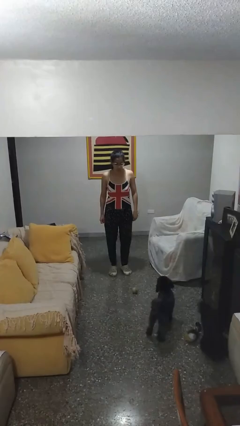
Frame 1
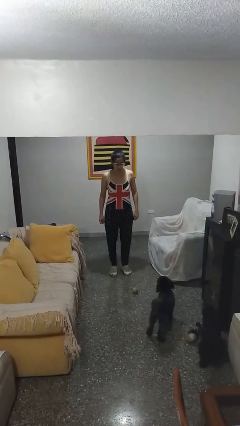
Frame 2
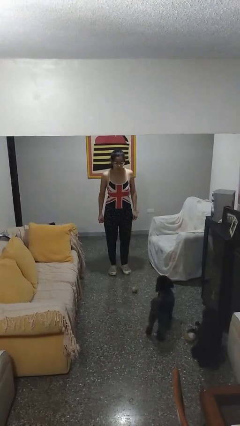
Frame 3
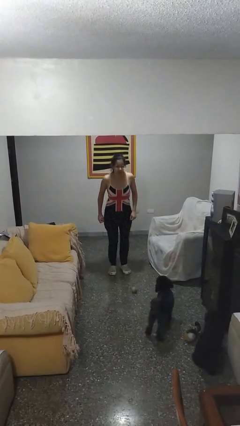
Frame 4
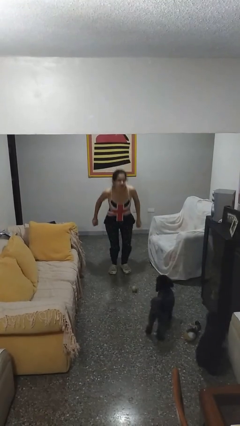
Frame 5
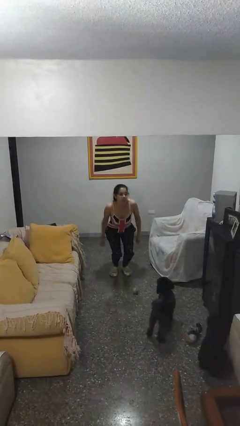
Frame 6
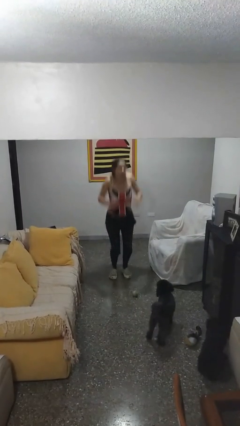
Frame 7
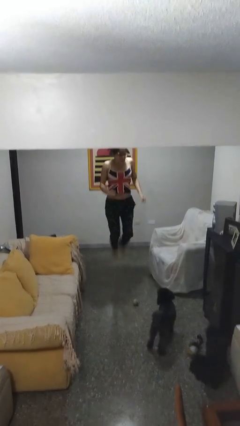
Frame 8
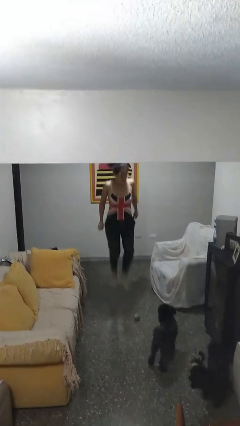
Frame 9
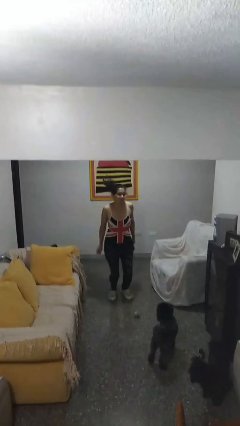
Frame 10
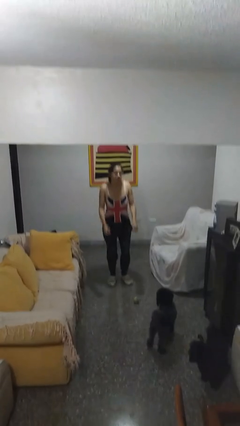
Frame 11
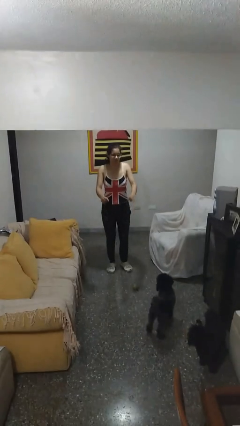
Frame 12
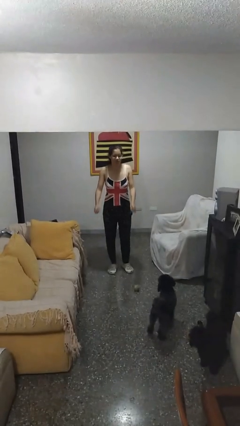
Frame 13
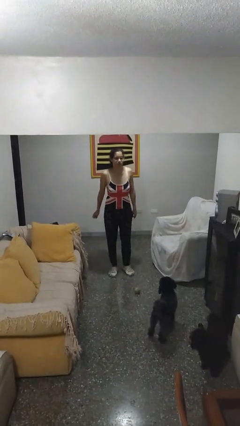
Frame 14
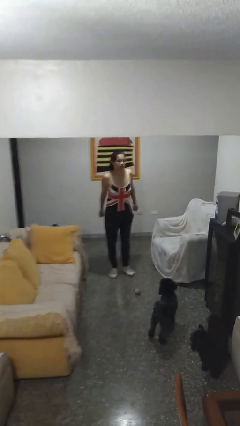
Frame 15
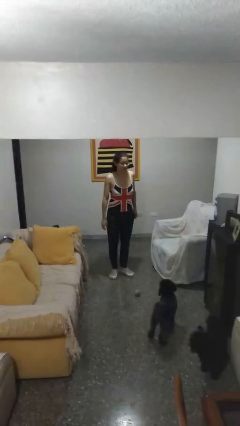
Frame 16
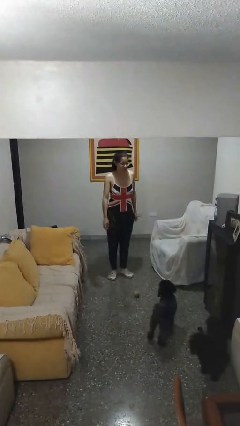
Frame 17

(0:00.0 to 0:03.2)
person jumps

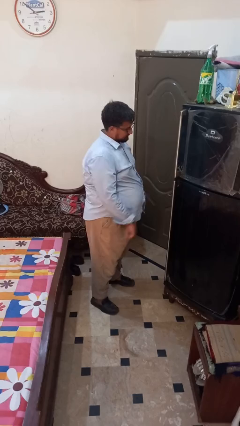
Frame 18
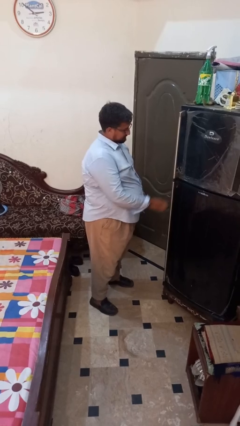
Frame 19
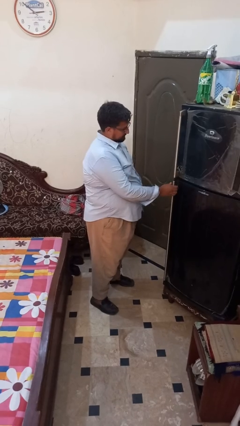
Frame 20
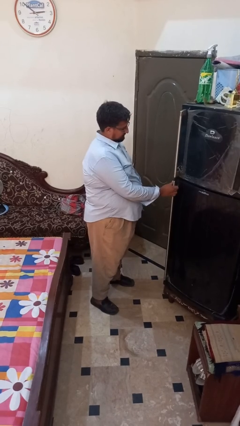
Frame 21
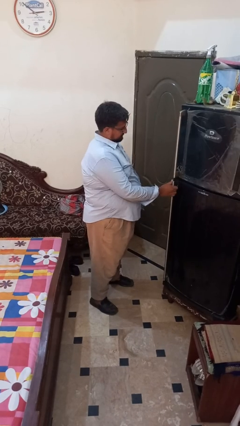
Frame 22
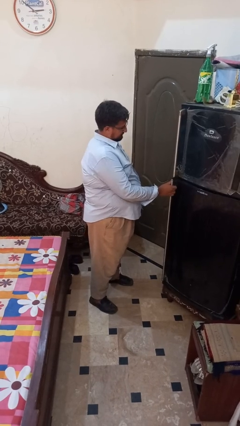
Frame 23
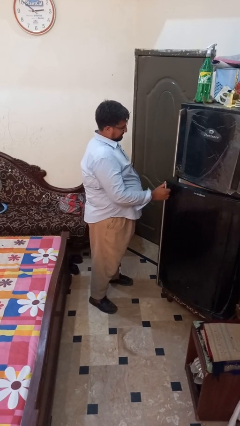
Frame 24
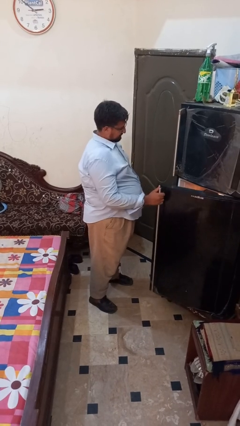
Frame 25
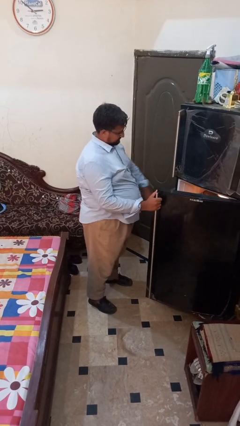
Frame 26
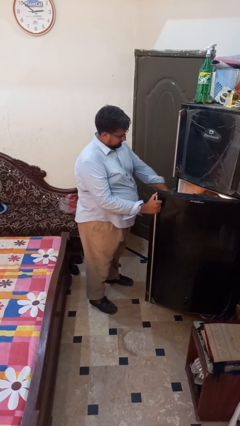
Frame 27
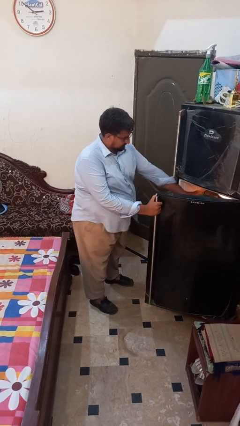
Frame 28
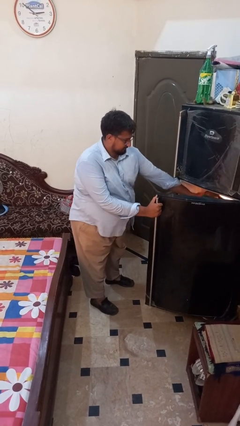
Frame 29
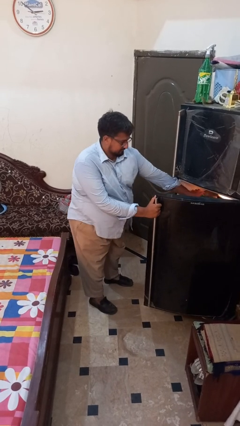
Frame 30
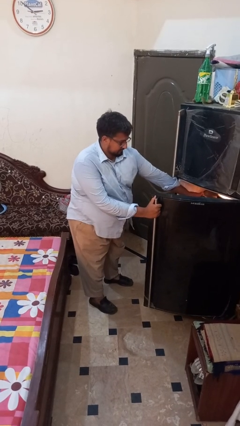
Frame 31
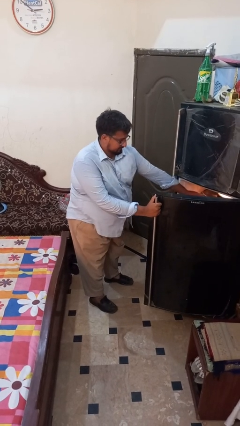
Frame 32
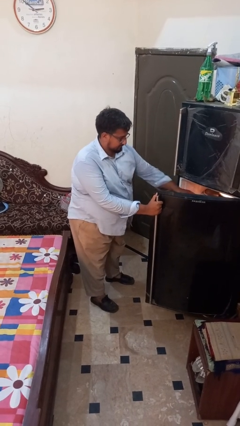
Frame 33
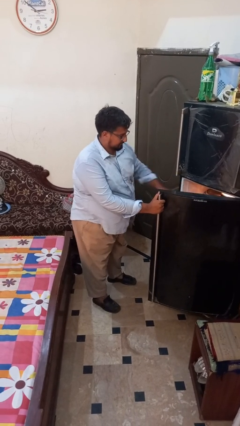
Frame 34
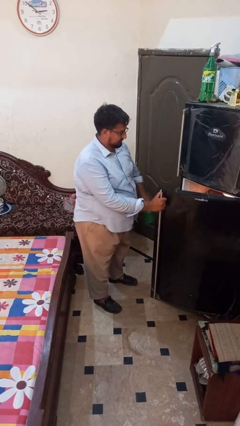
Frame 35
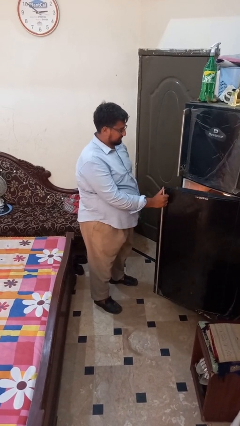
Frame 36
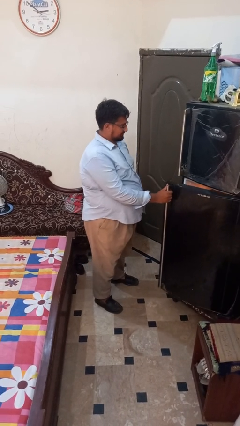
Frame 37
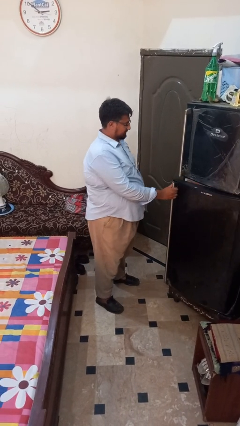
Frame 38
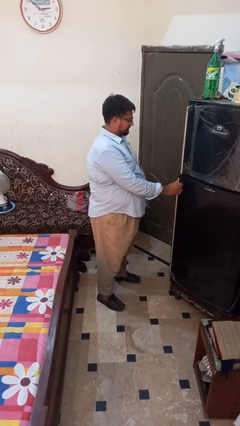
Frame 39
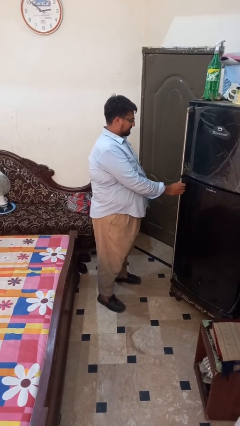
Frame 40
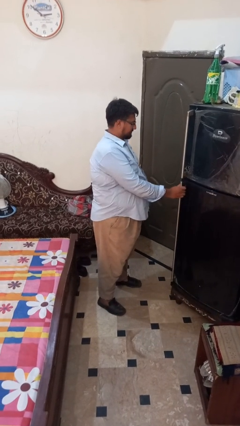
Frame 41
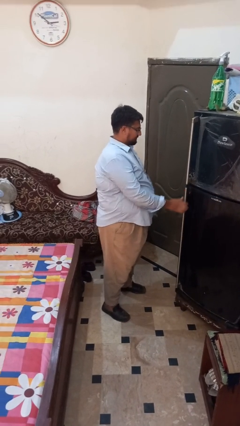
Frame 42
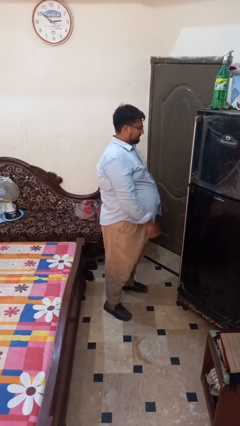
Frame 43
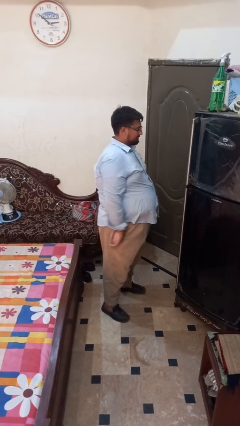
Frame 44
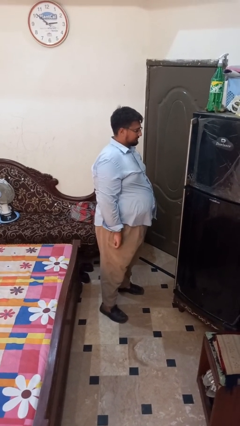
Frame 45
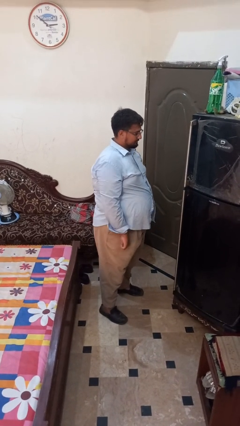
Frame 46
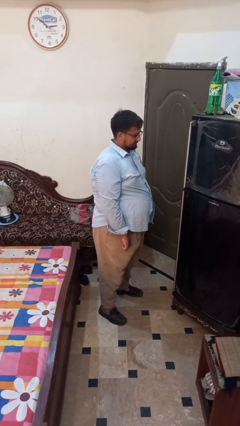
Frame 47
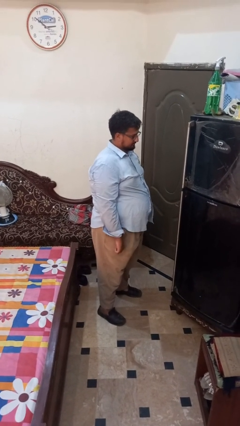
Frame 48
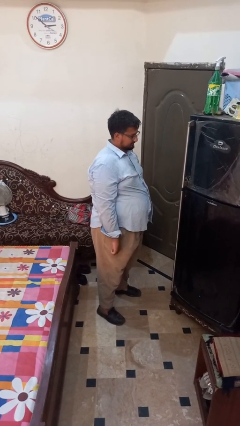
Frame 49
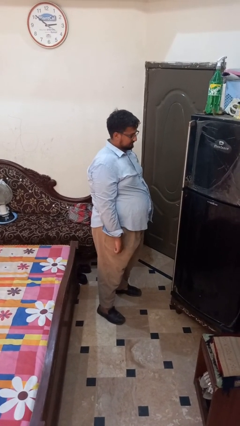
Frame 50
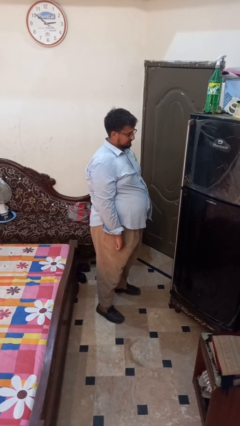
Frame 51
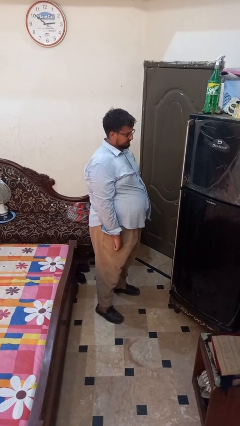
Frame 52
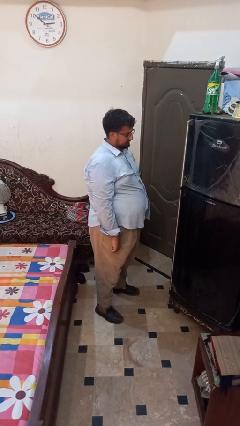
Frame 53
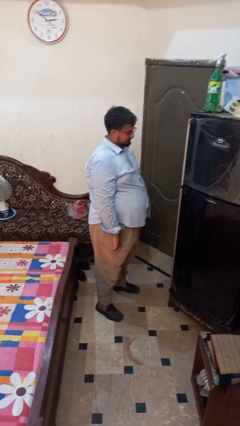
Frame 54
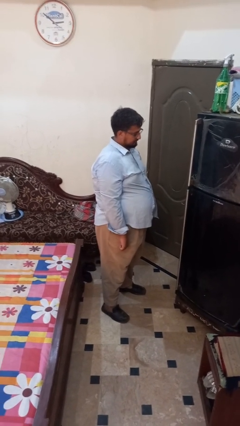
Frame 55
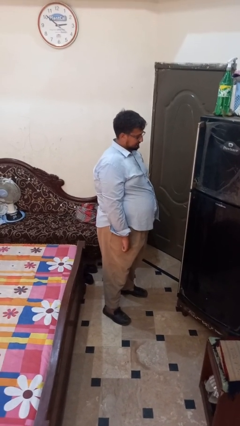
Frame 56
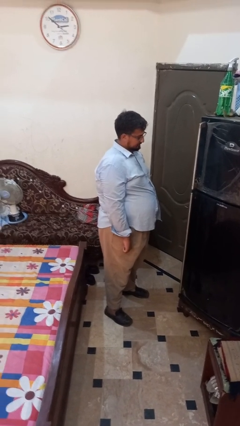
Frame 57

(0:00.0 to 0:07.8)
person takes object from refrigerator

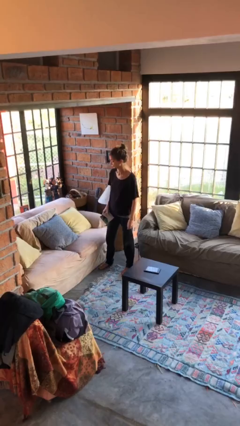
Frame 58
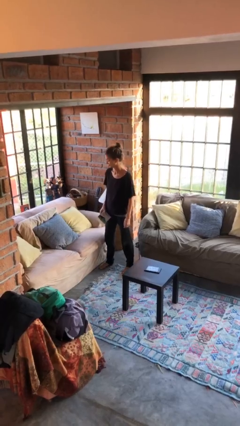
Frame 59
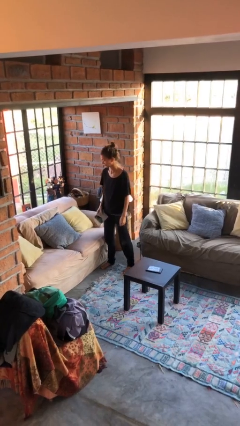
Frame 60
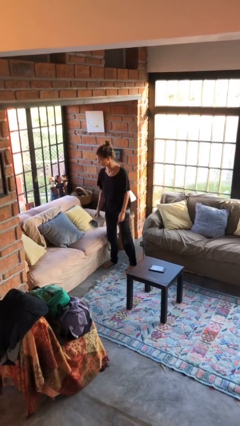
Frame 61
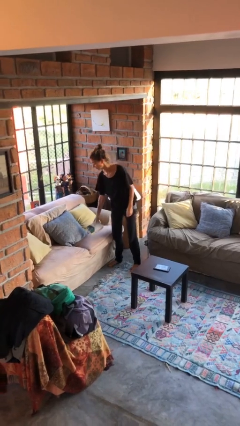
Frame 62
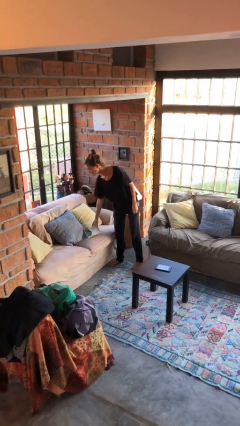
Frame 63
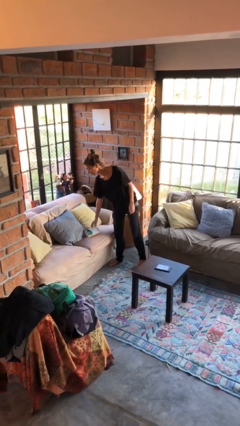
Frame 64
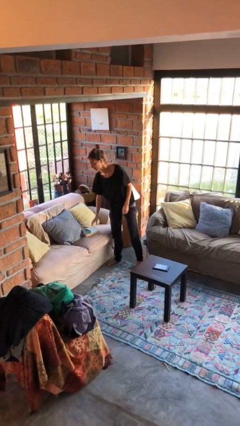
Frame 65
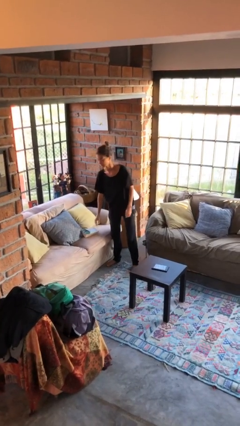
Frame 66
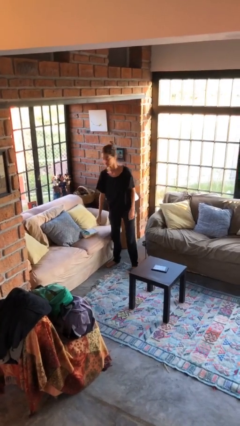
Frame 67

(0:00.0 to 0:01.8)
person puts down object on couch

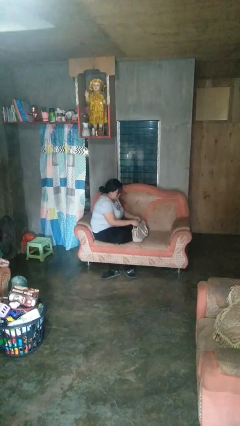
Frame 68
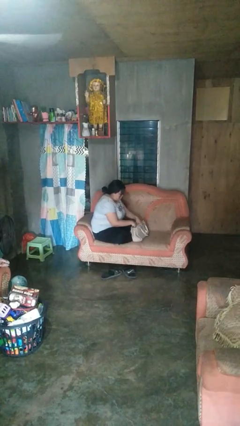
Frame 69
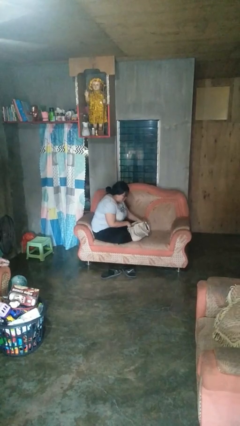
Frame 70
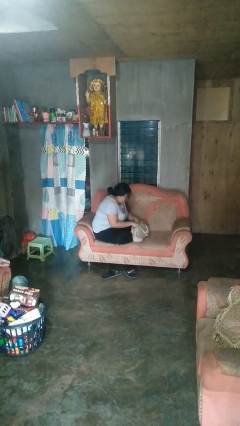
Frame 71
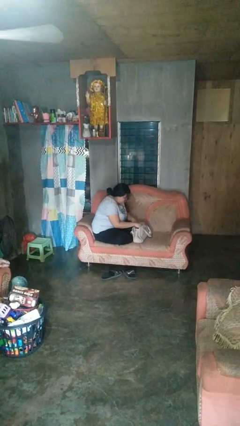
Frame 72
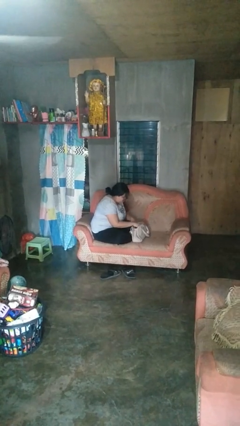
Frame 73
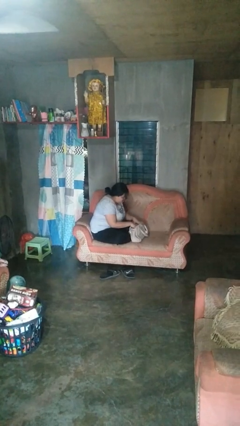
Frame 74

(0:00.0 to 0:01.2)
person searches in purse

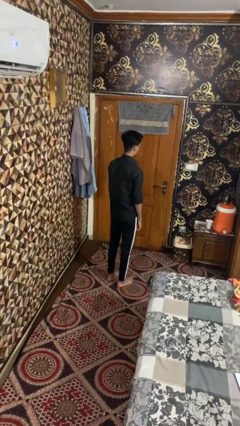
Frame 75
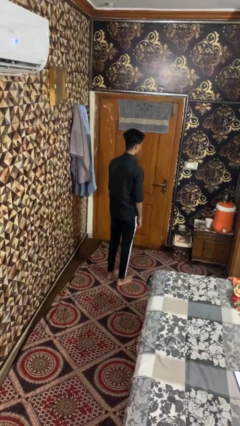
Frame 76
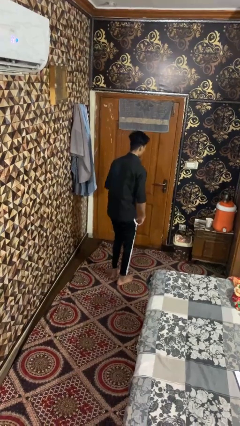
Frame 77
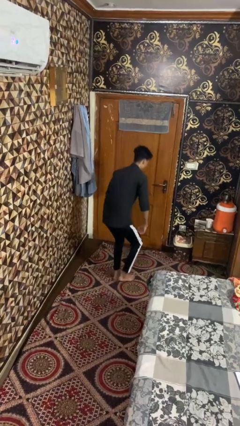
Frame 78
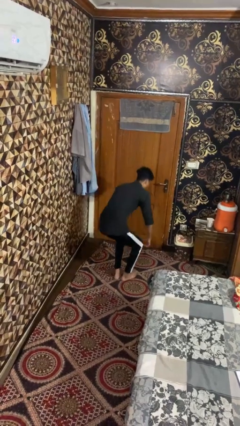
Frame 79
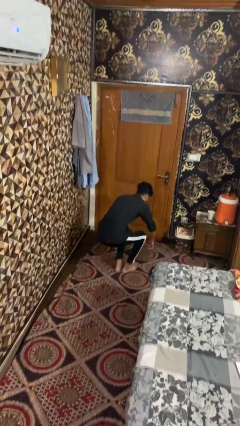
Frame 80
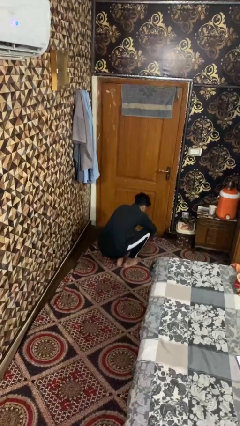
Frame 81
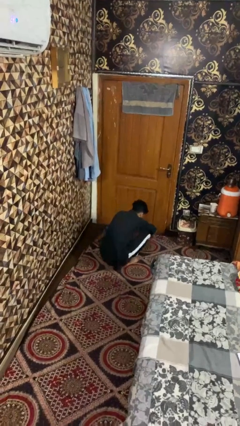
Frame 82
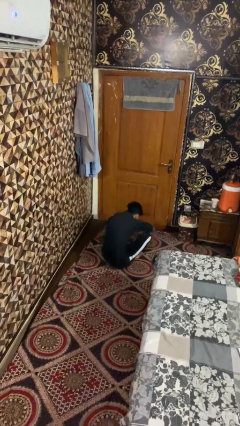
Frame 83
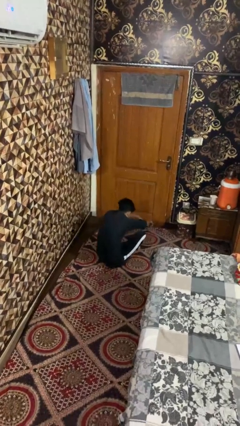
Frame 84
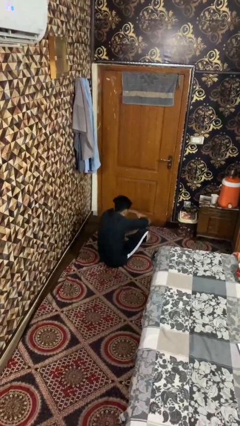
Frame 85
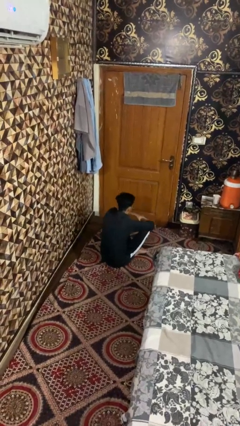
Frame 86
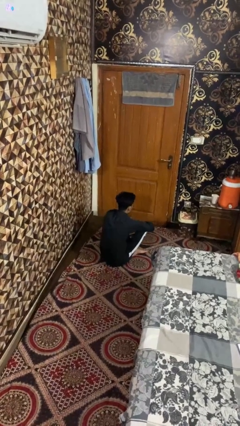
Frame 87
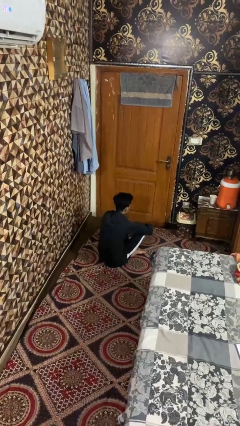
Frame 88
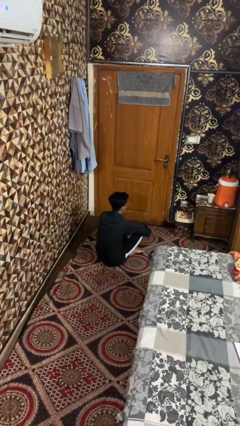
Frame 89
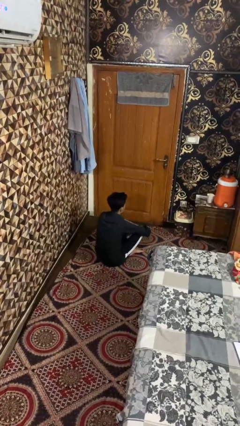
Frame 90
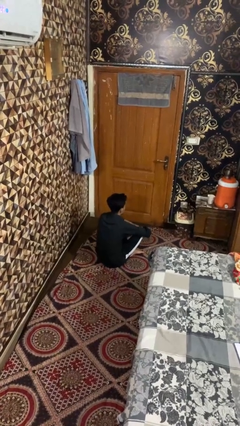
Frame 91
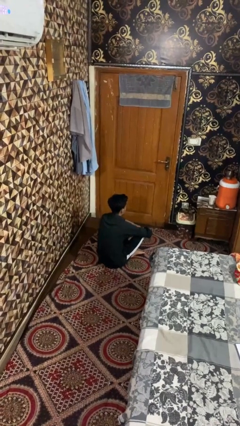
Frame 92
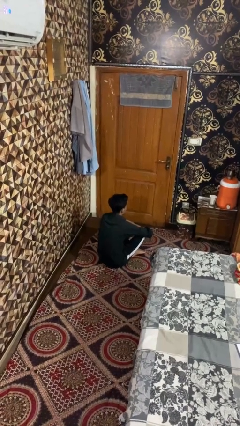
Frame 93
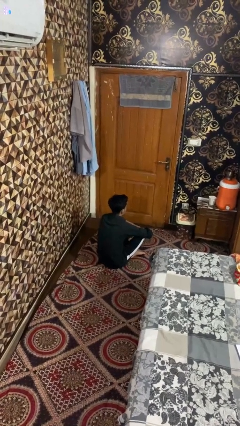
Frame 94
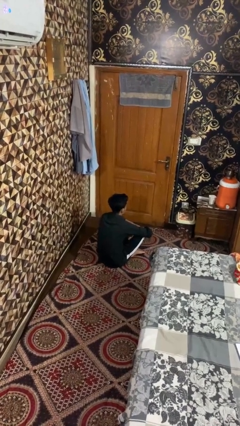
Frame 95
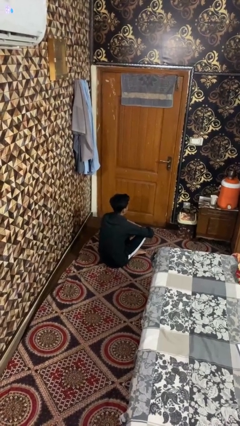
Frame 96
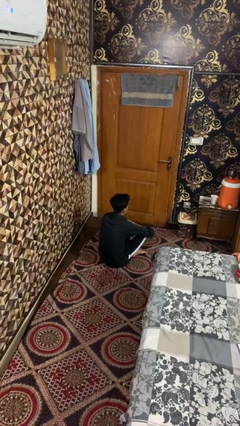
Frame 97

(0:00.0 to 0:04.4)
person sits crisscross
